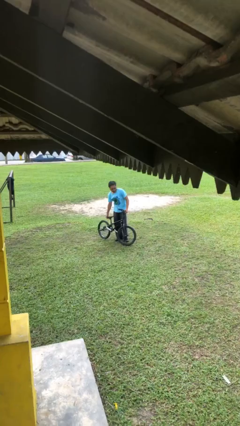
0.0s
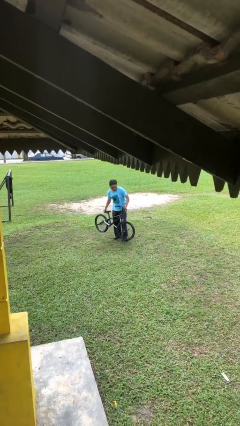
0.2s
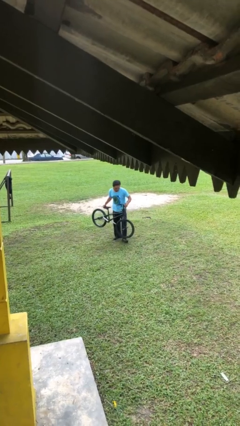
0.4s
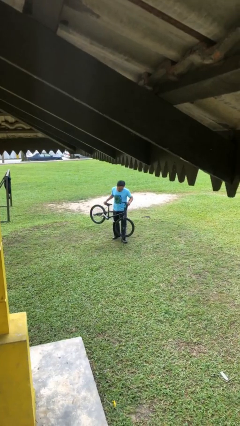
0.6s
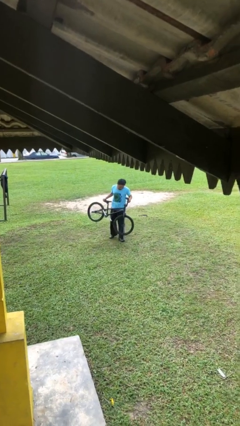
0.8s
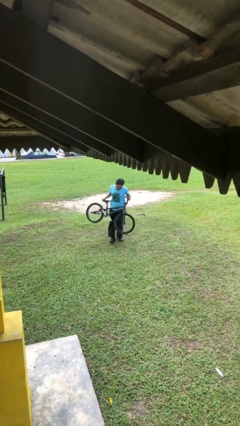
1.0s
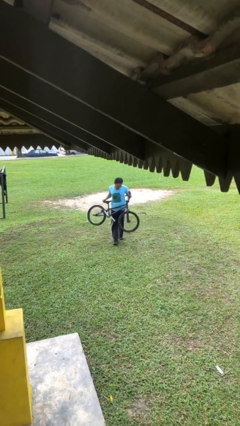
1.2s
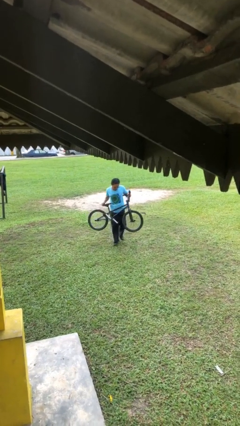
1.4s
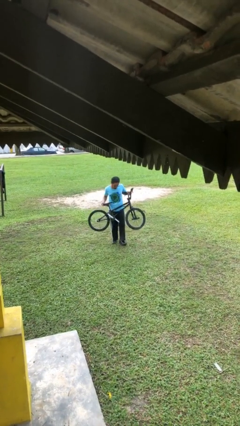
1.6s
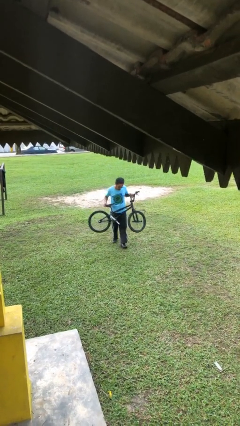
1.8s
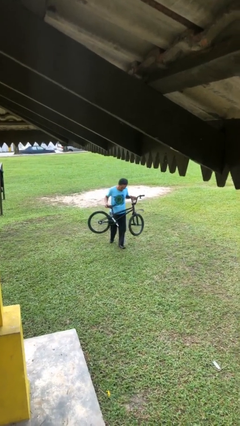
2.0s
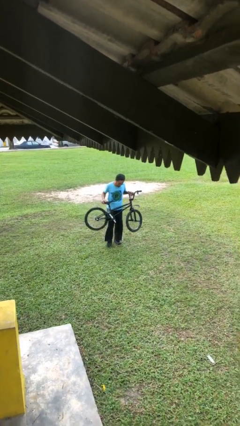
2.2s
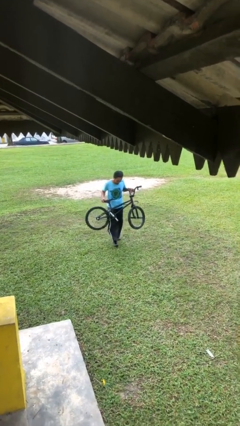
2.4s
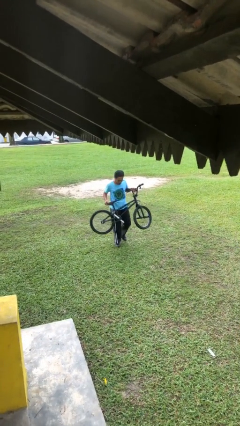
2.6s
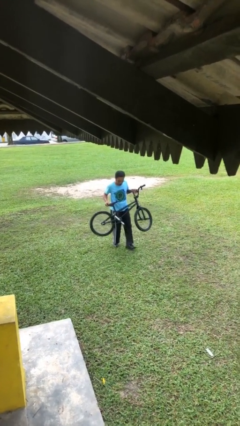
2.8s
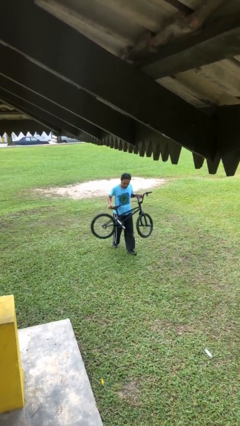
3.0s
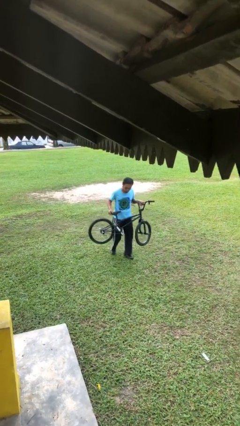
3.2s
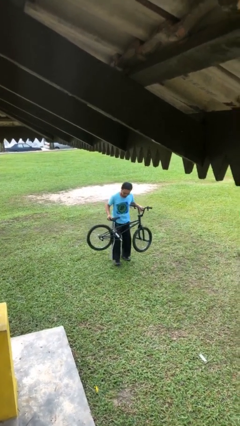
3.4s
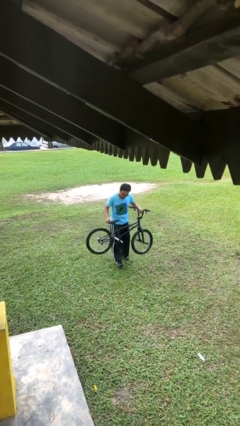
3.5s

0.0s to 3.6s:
person carries heavy object

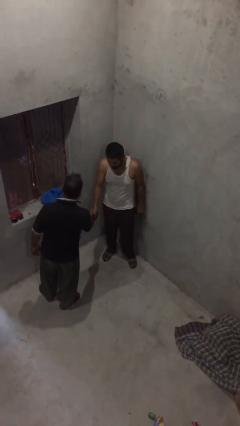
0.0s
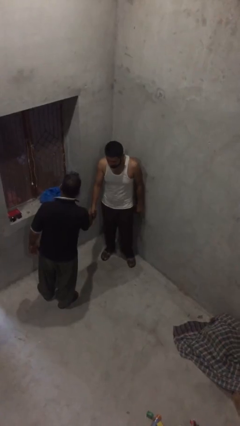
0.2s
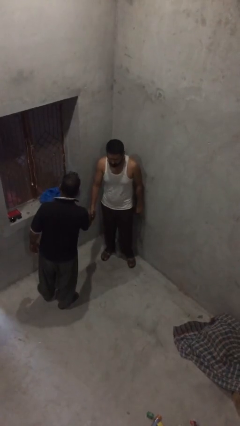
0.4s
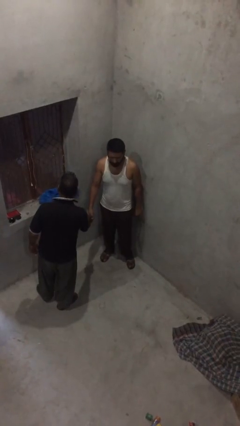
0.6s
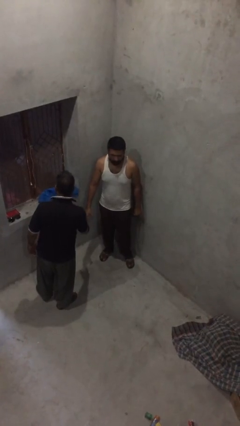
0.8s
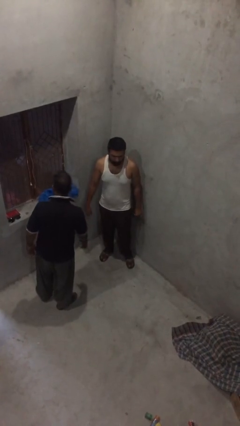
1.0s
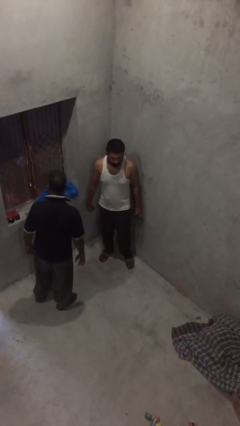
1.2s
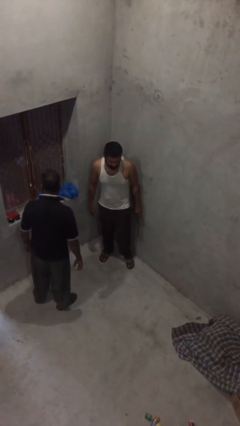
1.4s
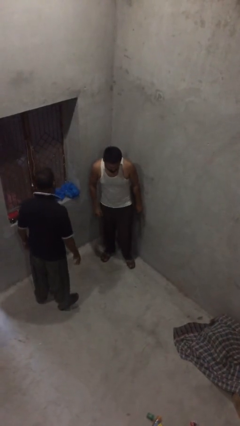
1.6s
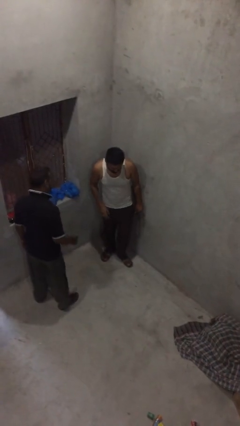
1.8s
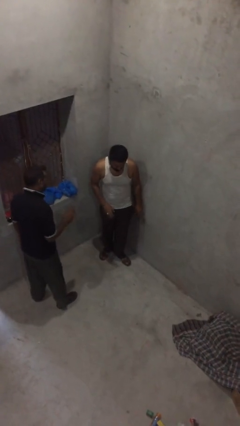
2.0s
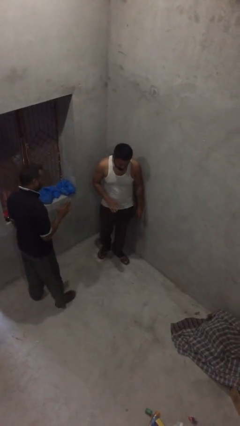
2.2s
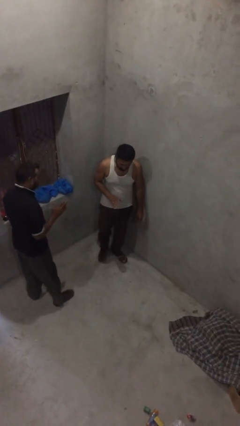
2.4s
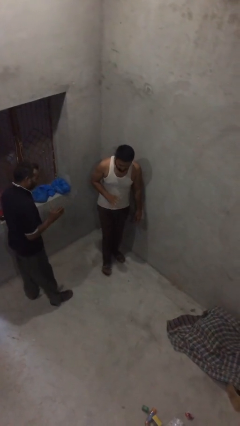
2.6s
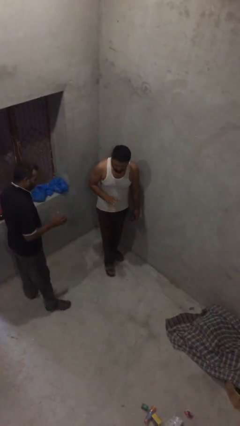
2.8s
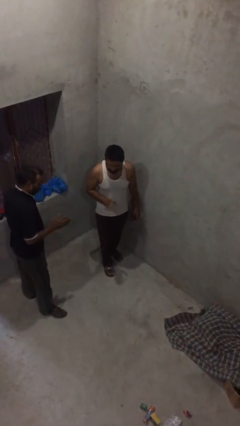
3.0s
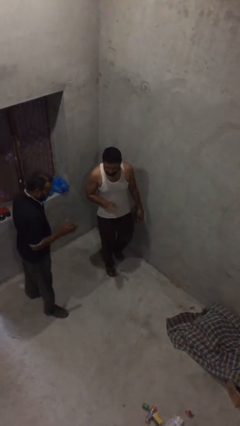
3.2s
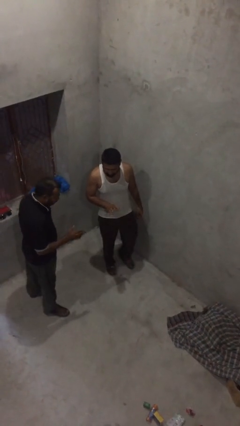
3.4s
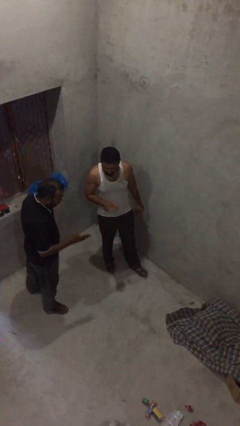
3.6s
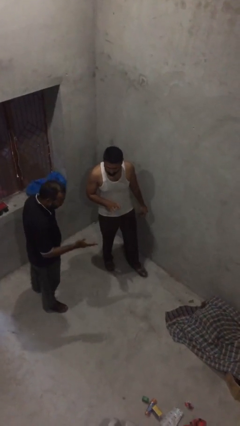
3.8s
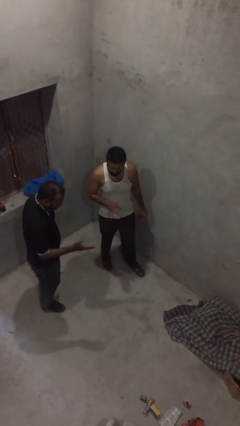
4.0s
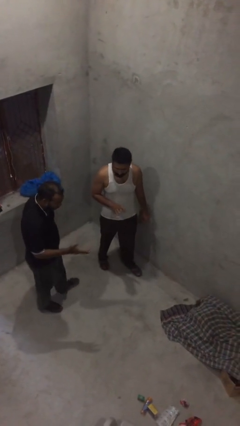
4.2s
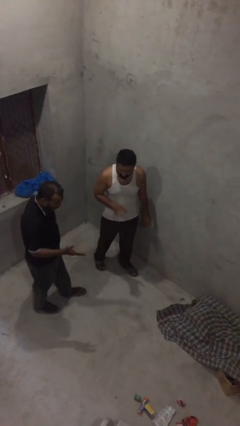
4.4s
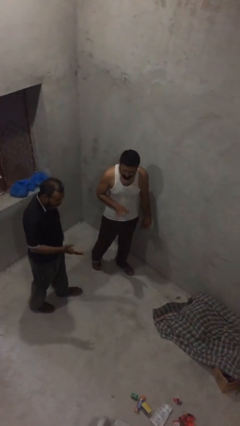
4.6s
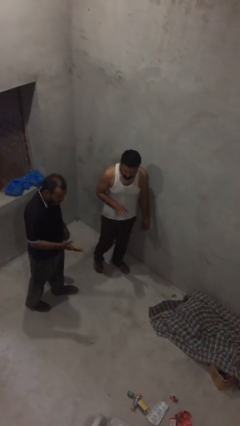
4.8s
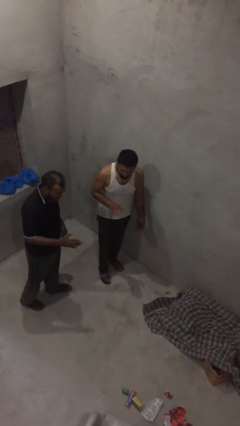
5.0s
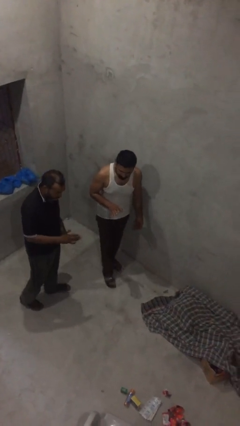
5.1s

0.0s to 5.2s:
person talks to person

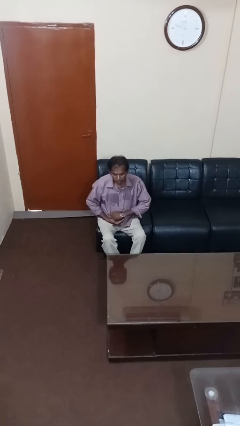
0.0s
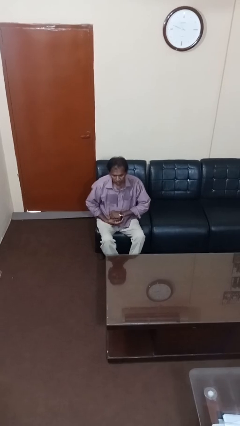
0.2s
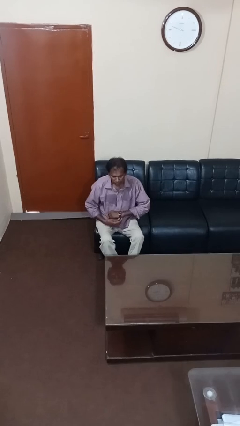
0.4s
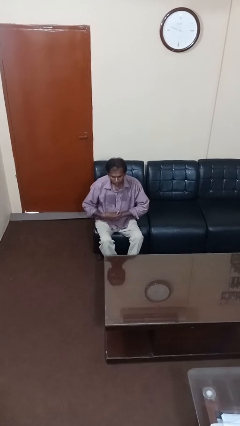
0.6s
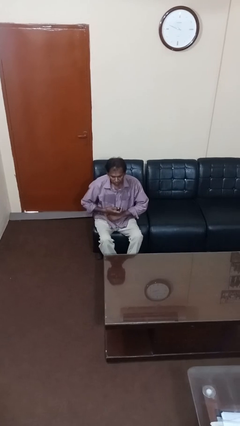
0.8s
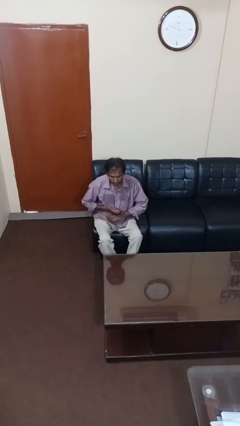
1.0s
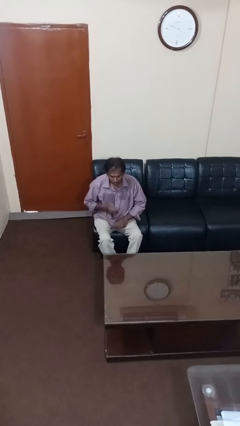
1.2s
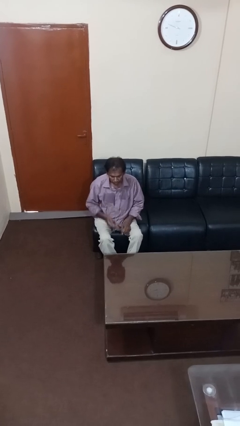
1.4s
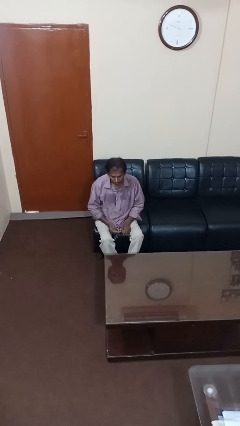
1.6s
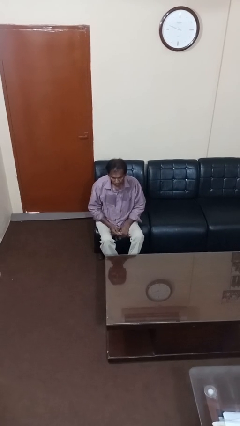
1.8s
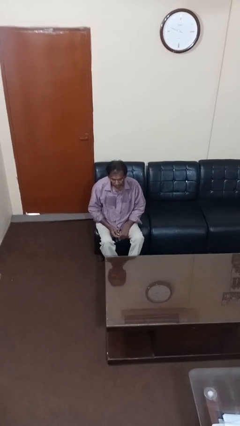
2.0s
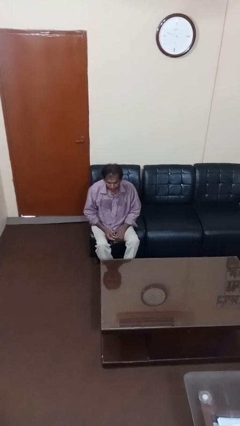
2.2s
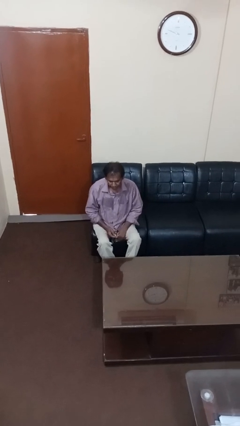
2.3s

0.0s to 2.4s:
person takes off wristwatch

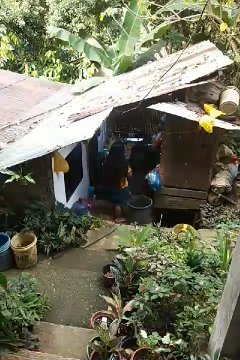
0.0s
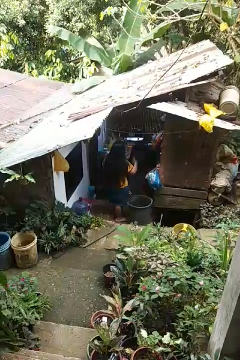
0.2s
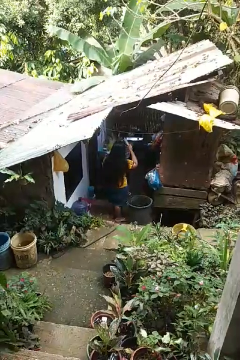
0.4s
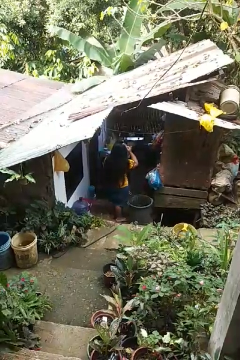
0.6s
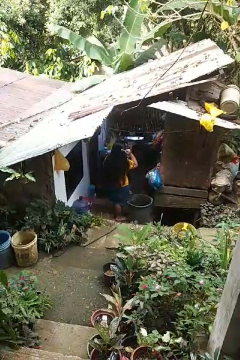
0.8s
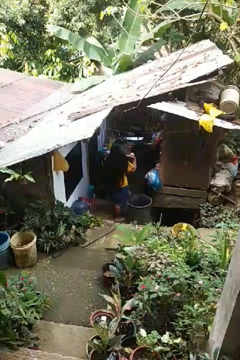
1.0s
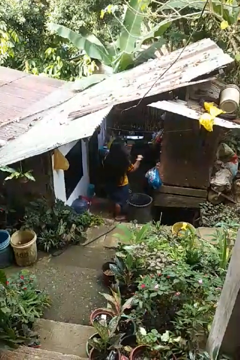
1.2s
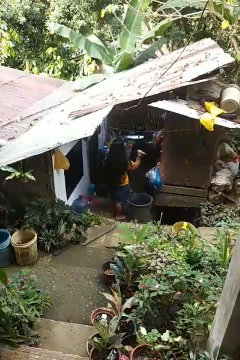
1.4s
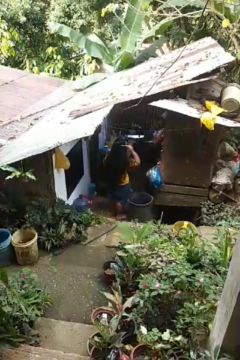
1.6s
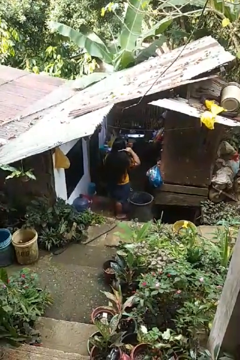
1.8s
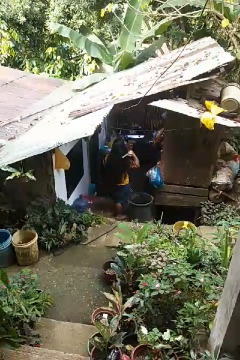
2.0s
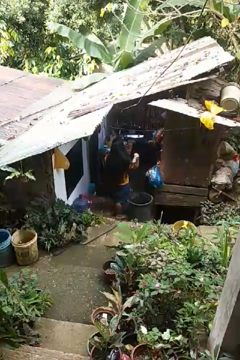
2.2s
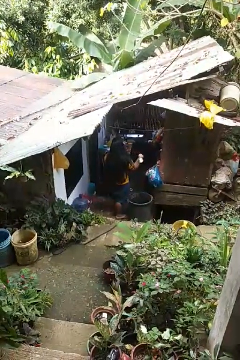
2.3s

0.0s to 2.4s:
person brushes hair

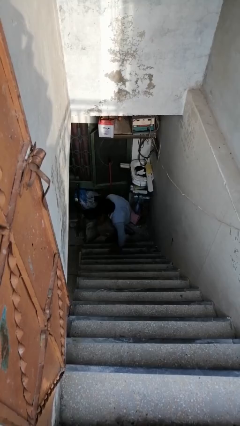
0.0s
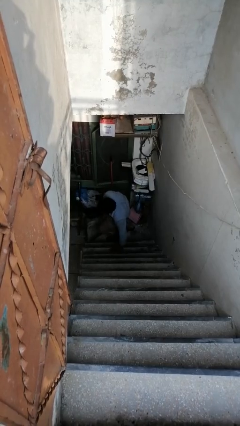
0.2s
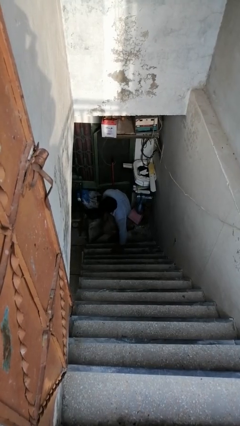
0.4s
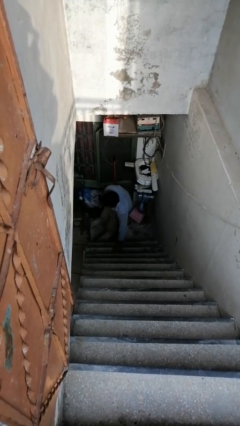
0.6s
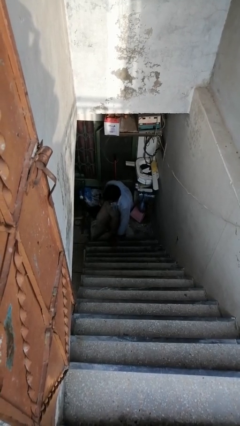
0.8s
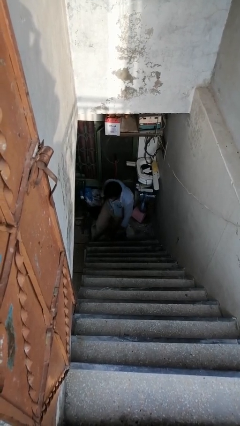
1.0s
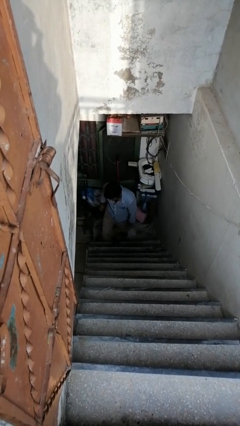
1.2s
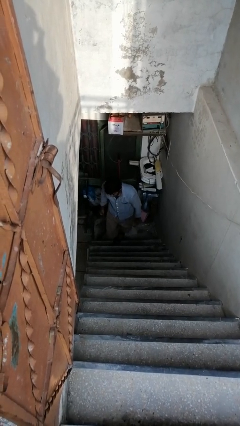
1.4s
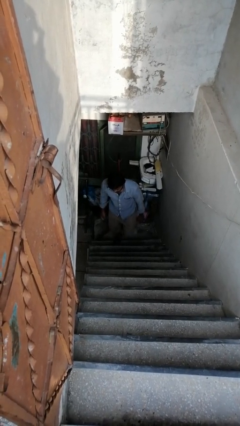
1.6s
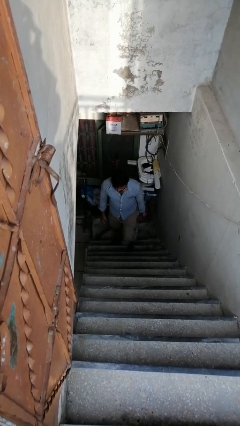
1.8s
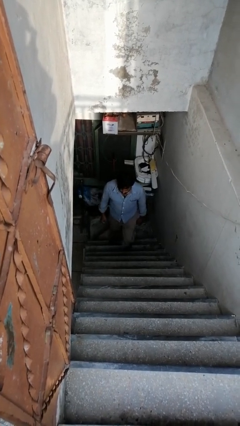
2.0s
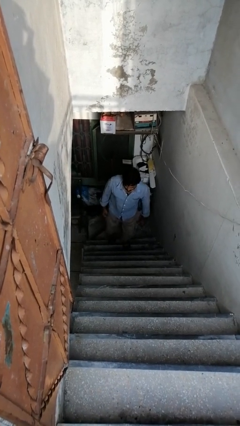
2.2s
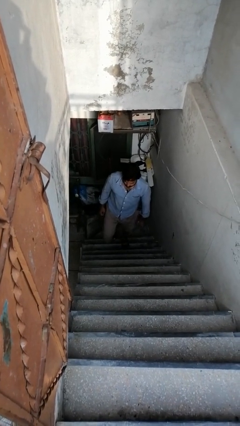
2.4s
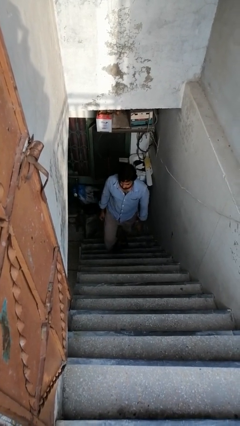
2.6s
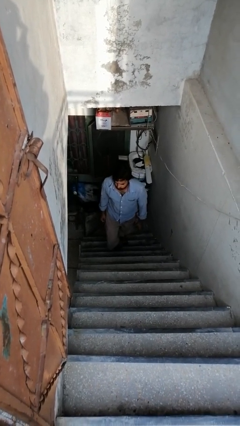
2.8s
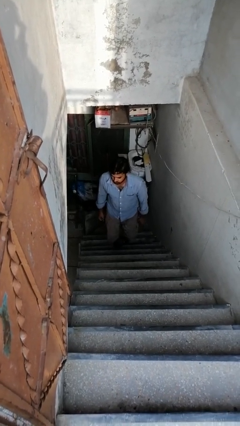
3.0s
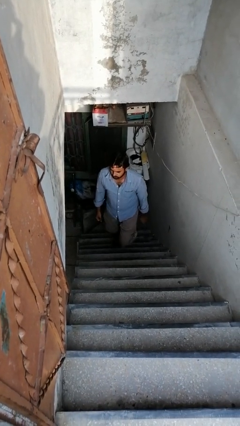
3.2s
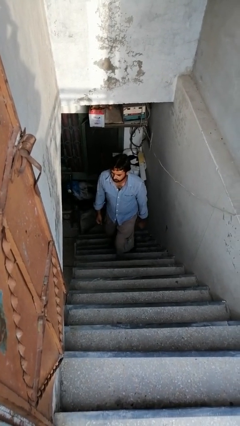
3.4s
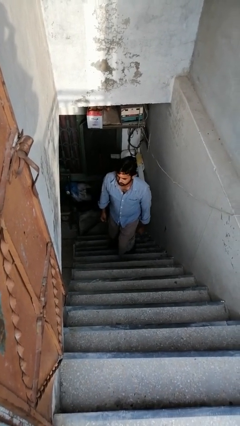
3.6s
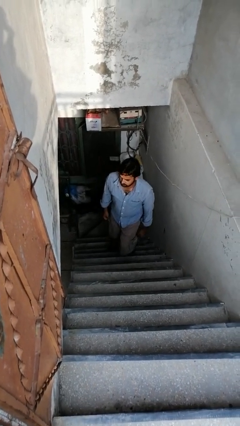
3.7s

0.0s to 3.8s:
person climbs up stairs

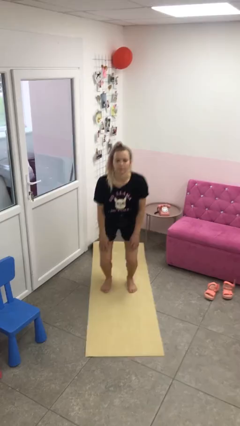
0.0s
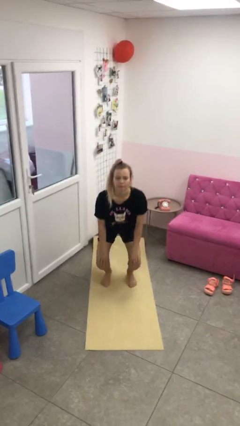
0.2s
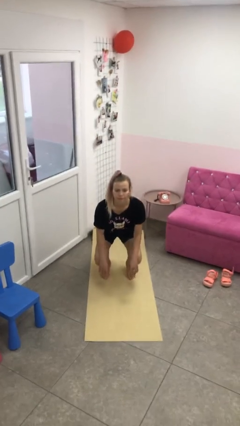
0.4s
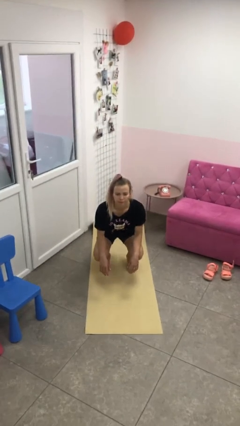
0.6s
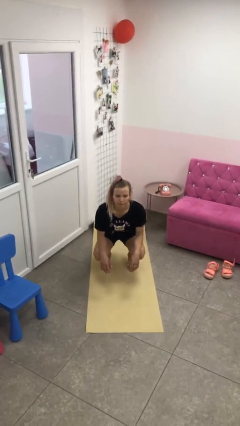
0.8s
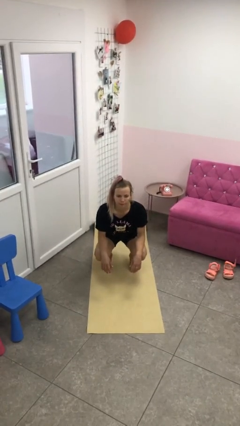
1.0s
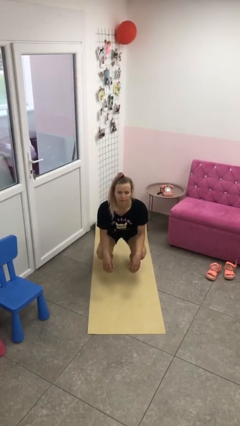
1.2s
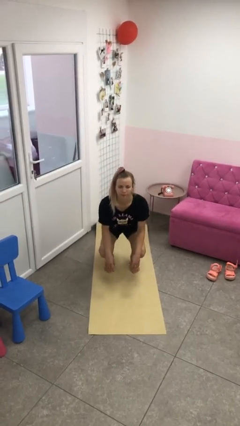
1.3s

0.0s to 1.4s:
person squats
